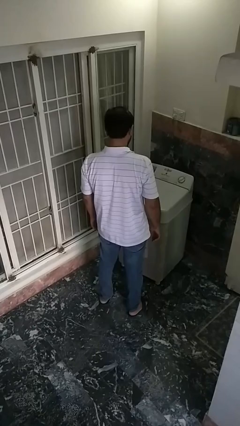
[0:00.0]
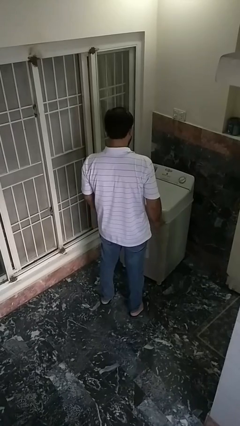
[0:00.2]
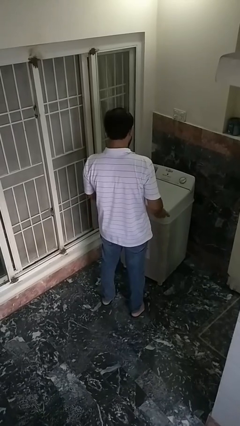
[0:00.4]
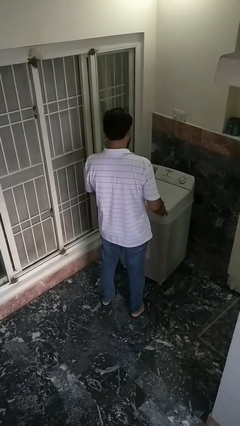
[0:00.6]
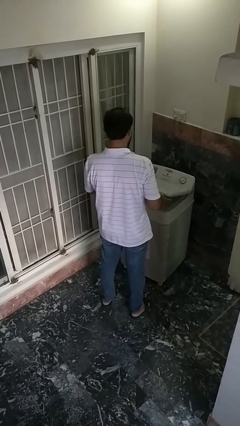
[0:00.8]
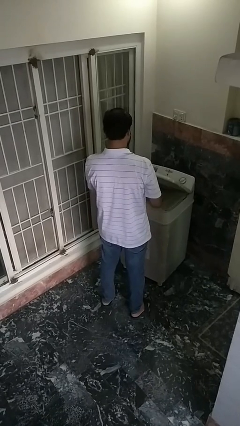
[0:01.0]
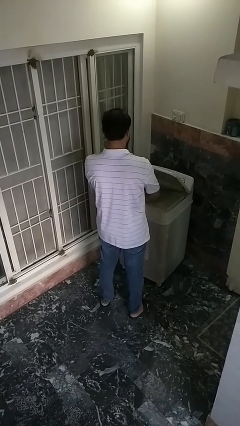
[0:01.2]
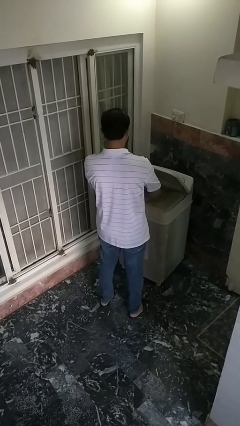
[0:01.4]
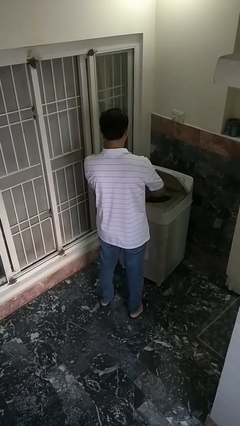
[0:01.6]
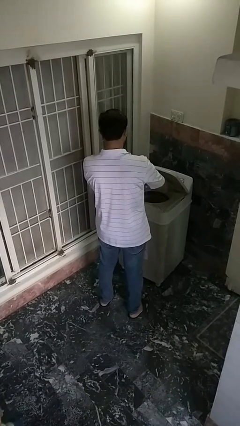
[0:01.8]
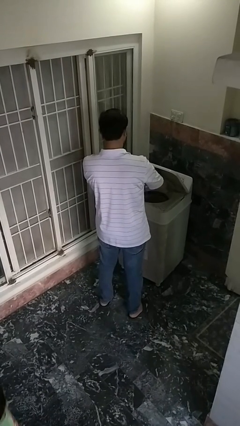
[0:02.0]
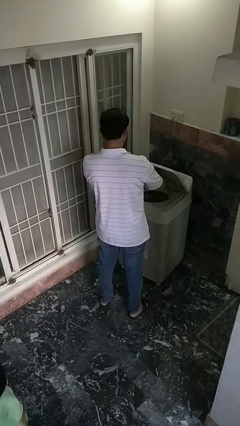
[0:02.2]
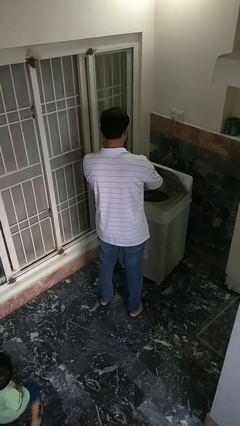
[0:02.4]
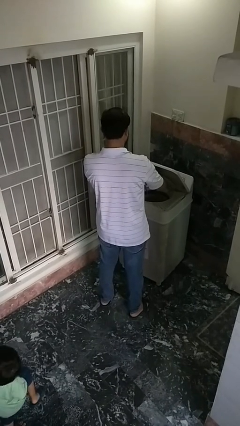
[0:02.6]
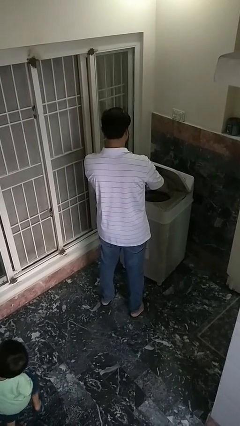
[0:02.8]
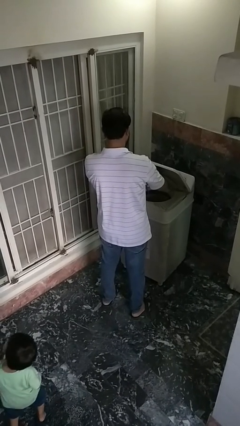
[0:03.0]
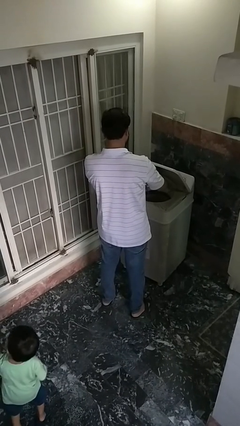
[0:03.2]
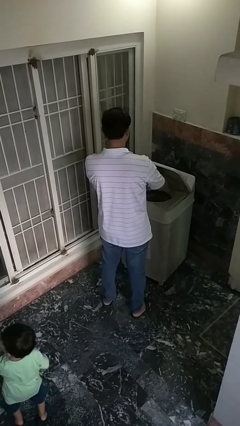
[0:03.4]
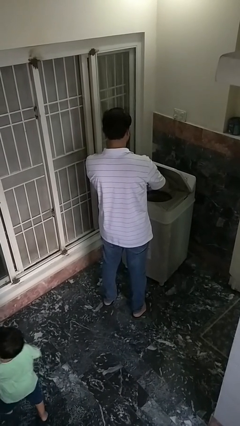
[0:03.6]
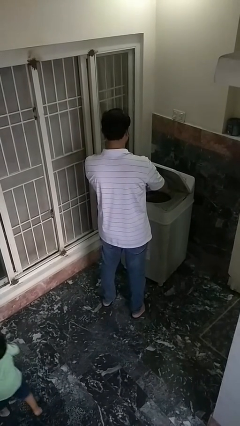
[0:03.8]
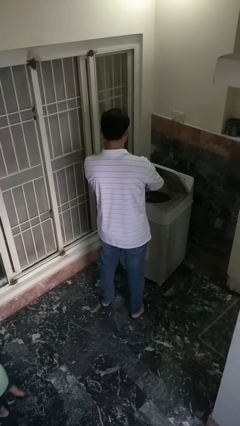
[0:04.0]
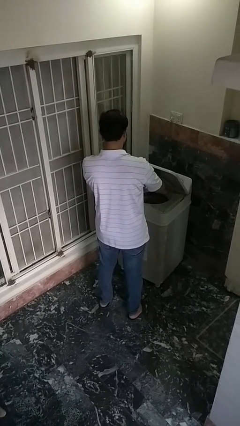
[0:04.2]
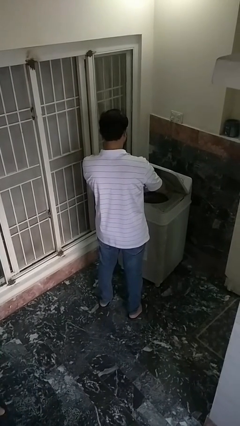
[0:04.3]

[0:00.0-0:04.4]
person opens clothes washer

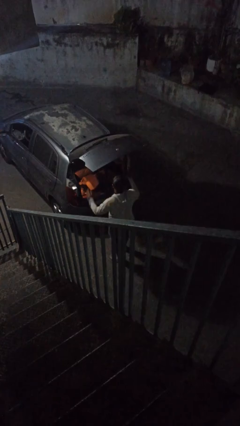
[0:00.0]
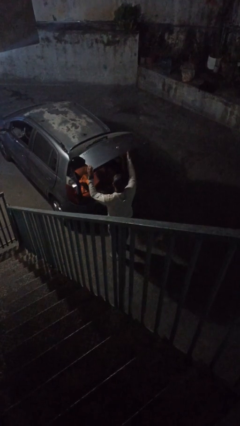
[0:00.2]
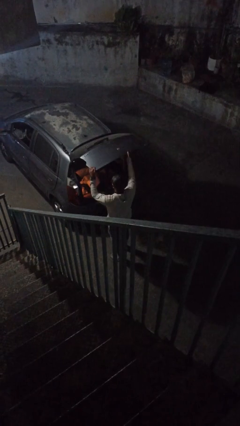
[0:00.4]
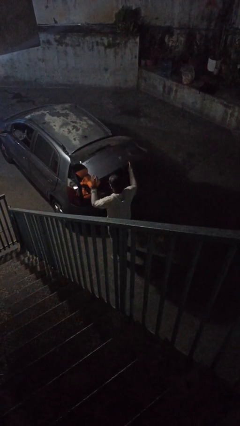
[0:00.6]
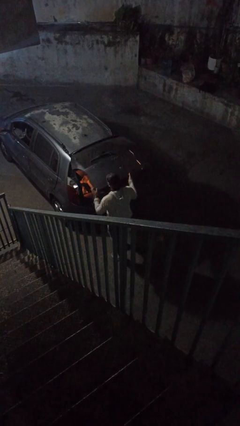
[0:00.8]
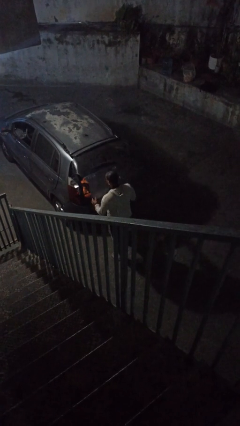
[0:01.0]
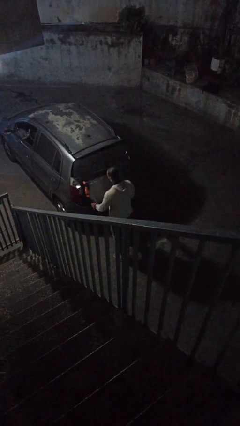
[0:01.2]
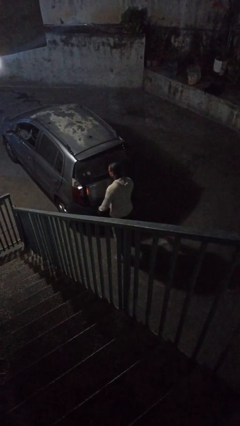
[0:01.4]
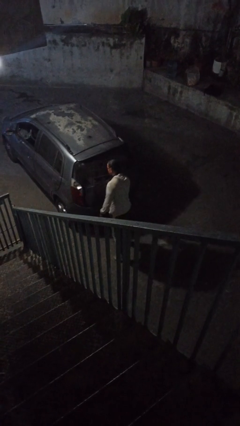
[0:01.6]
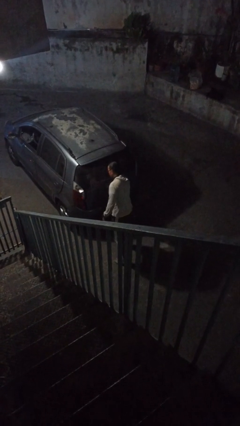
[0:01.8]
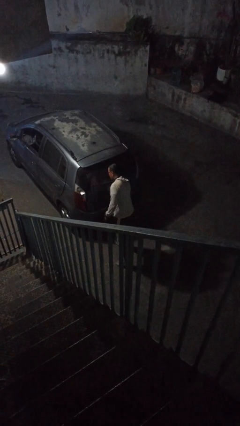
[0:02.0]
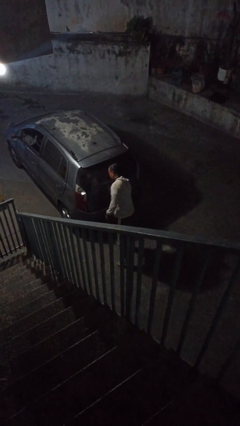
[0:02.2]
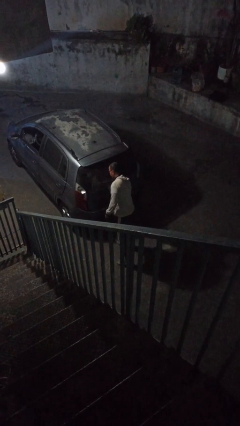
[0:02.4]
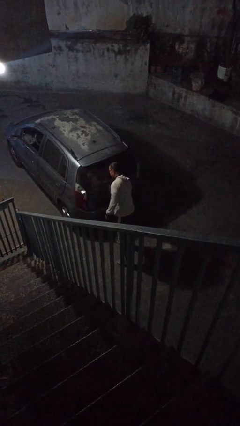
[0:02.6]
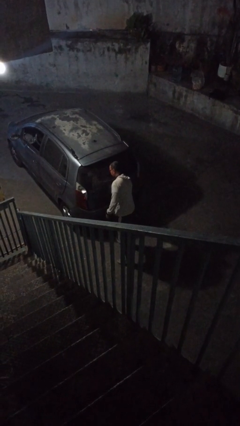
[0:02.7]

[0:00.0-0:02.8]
person closes car trunk

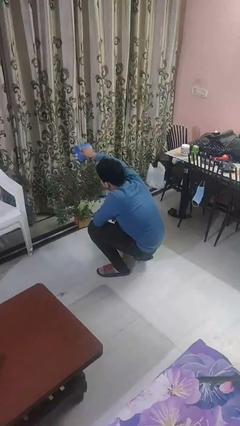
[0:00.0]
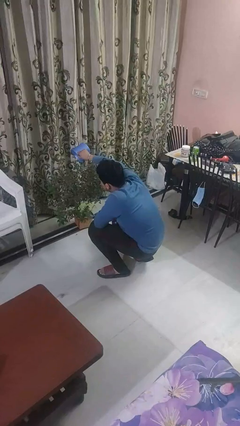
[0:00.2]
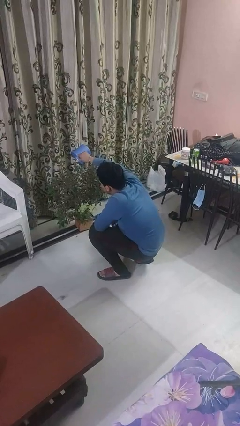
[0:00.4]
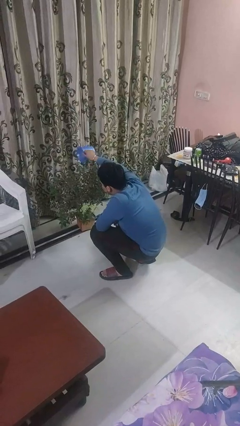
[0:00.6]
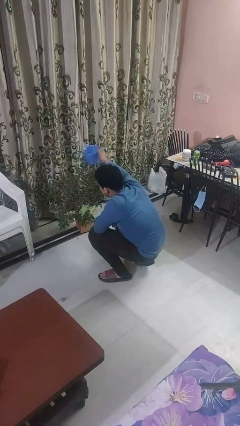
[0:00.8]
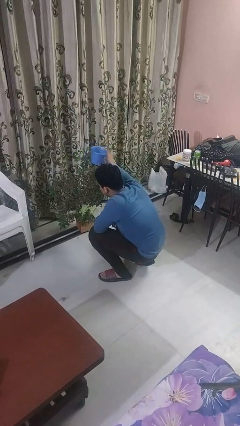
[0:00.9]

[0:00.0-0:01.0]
person waters houseplant

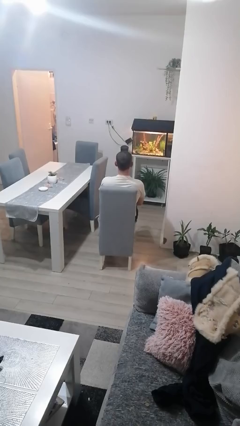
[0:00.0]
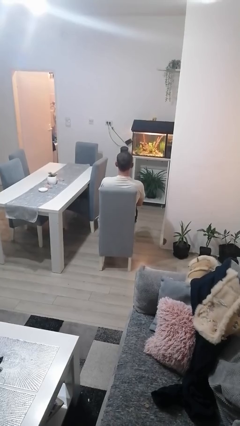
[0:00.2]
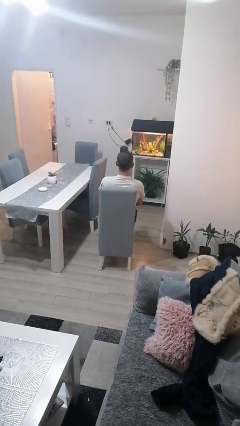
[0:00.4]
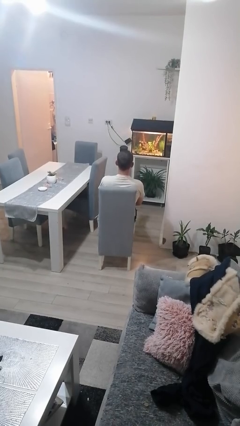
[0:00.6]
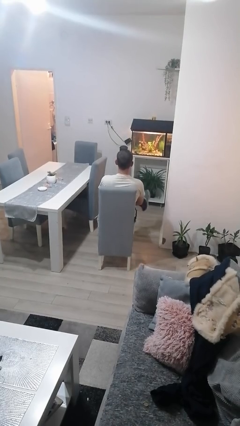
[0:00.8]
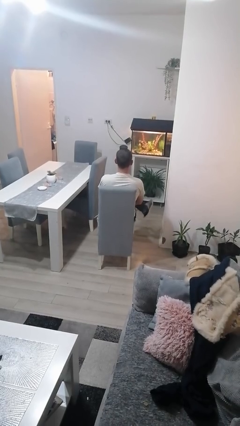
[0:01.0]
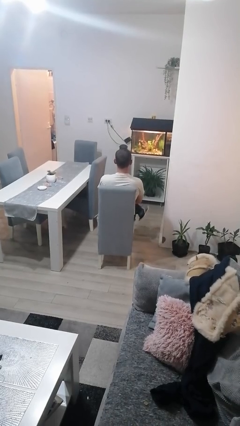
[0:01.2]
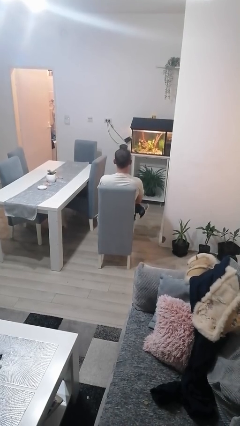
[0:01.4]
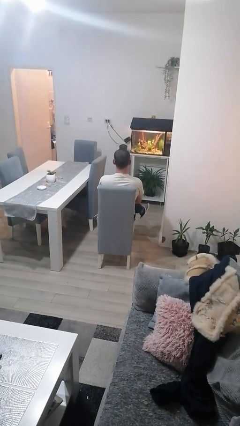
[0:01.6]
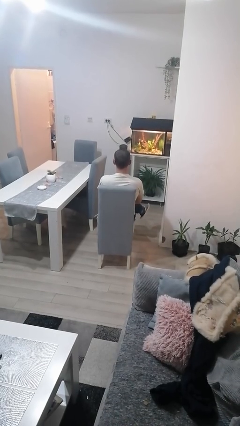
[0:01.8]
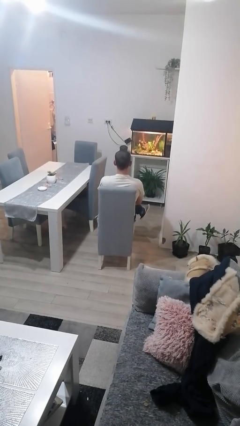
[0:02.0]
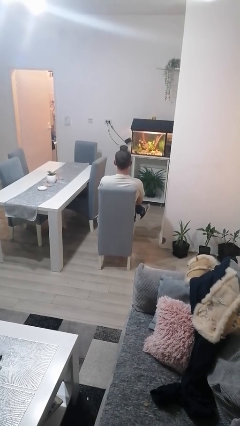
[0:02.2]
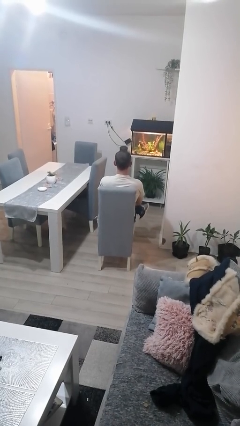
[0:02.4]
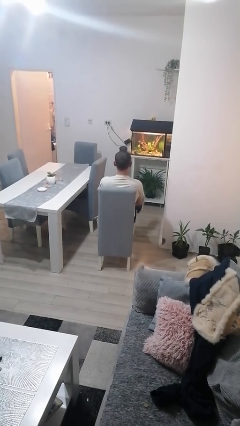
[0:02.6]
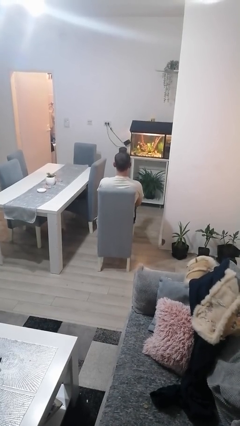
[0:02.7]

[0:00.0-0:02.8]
person crosses legs

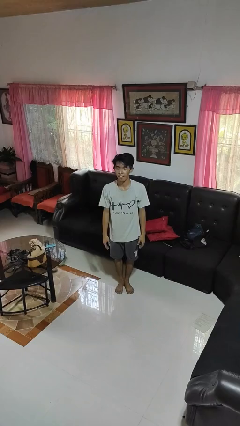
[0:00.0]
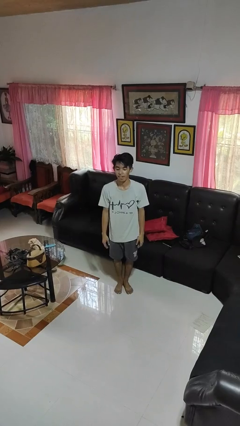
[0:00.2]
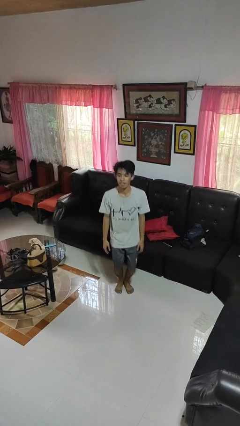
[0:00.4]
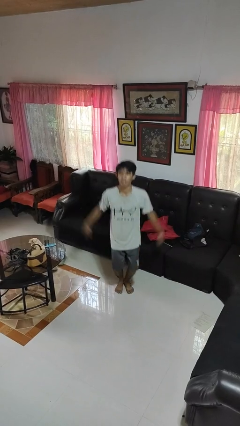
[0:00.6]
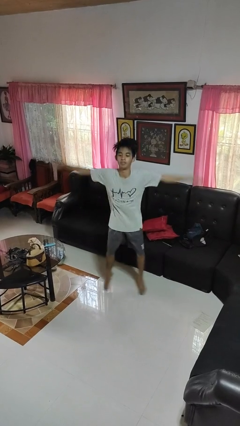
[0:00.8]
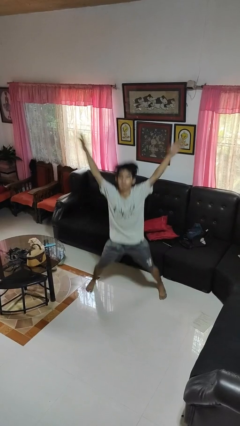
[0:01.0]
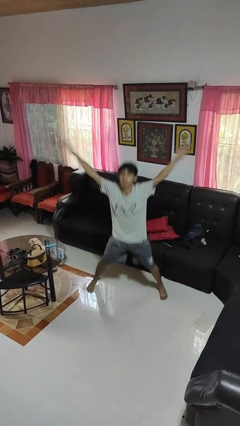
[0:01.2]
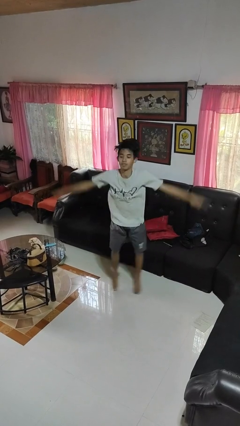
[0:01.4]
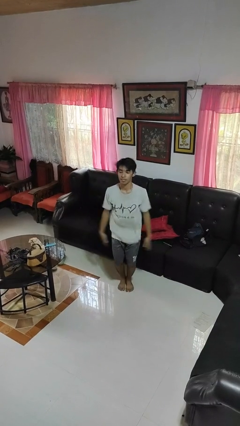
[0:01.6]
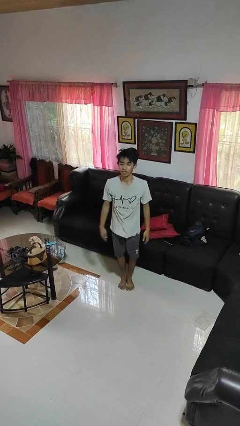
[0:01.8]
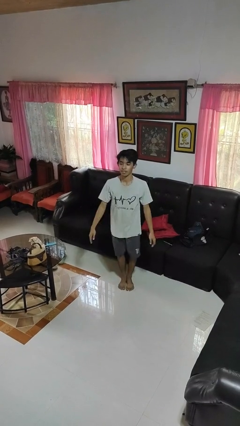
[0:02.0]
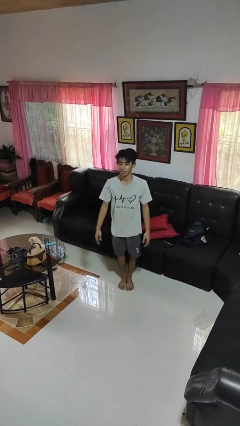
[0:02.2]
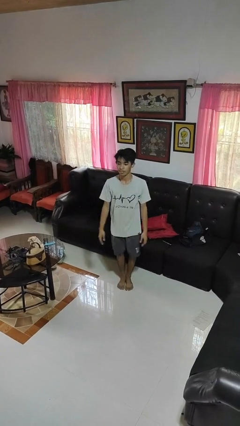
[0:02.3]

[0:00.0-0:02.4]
person exercises with jumping jacks

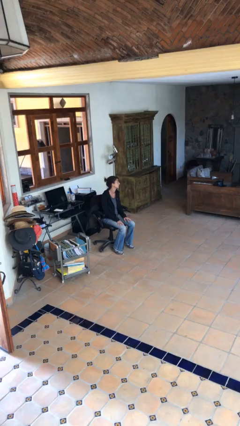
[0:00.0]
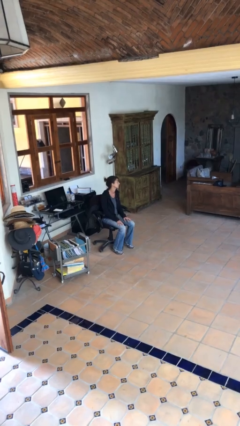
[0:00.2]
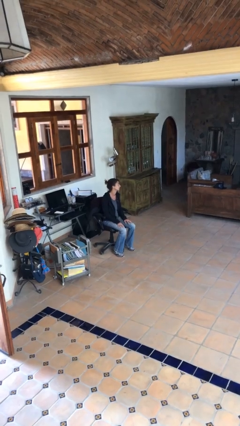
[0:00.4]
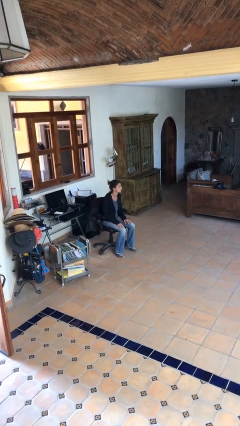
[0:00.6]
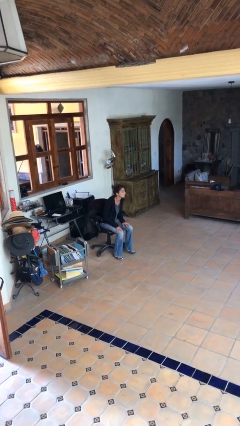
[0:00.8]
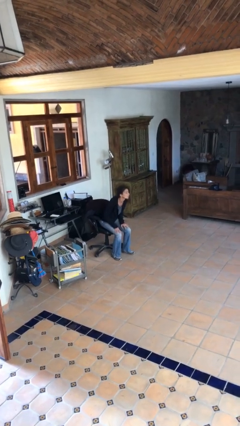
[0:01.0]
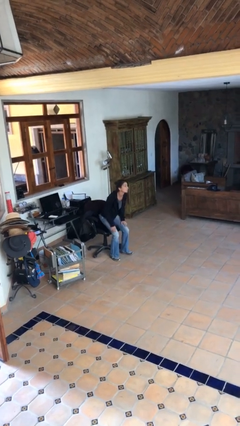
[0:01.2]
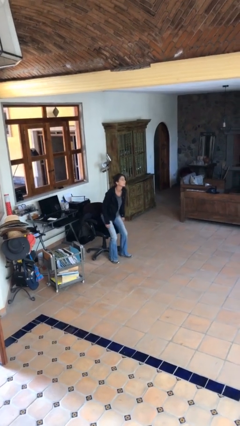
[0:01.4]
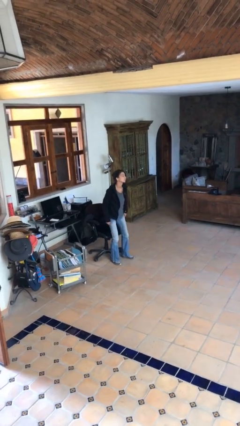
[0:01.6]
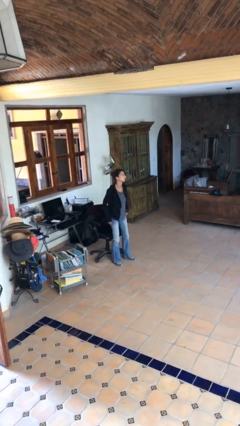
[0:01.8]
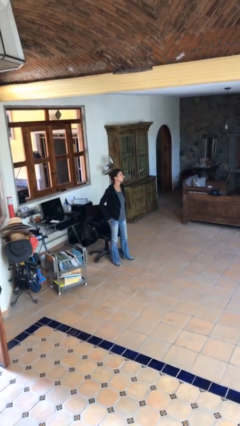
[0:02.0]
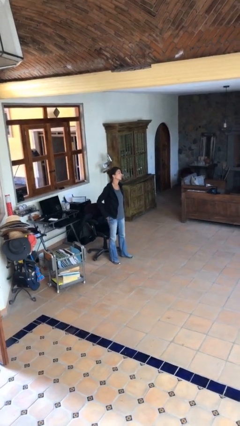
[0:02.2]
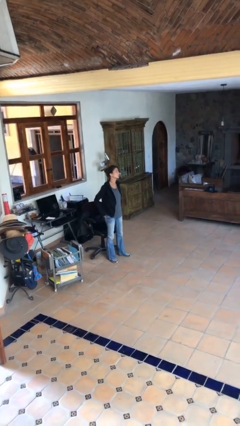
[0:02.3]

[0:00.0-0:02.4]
person stands up

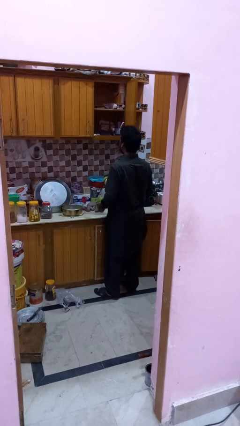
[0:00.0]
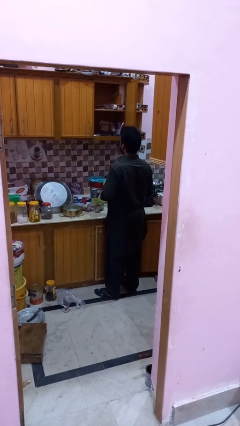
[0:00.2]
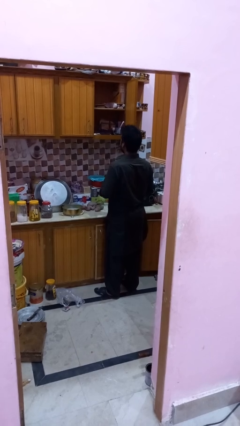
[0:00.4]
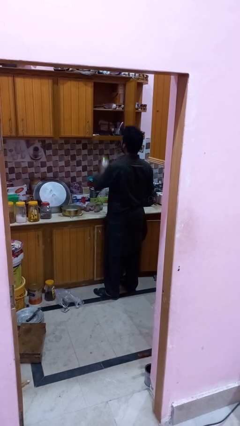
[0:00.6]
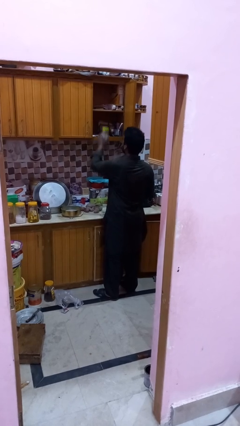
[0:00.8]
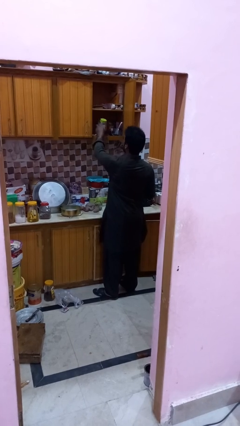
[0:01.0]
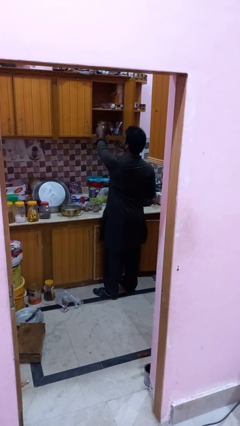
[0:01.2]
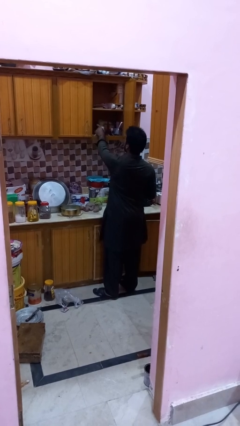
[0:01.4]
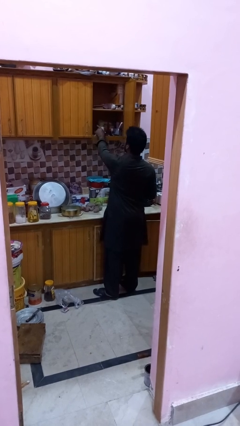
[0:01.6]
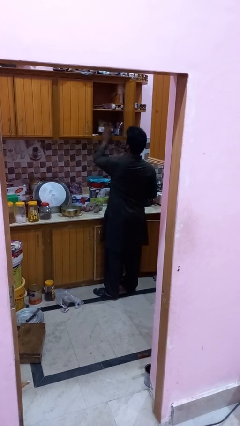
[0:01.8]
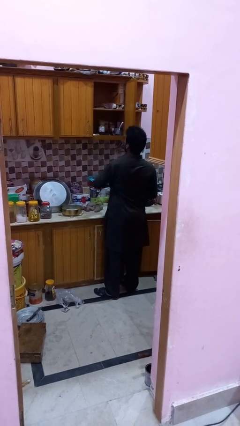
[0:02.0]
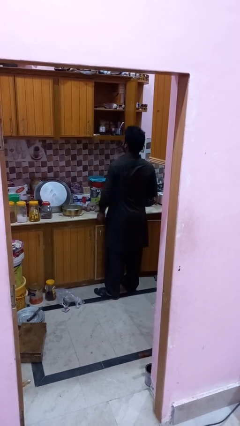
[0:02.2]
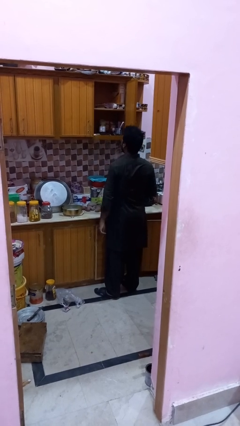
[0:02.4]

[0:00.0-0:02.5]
person puts object in cabinet
